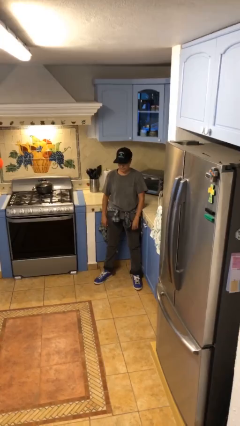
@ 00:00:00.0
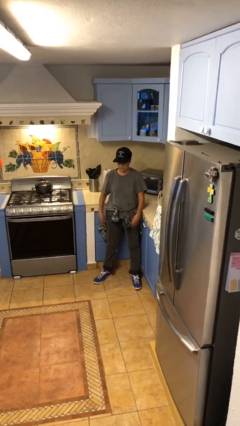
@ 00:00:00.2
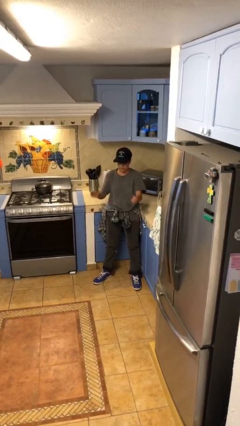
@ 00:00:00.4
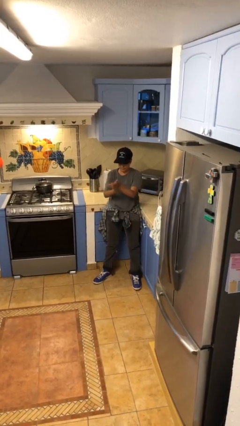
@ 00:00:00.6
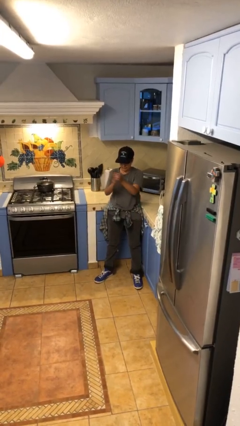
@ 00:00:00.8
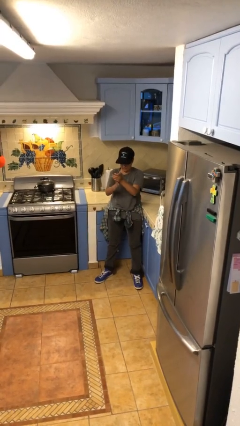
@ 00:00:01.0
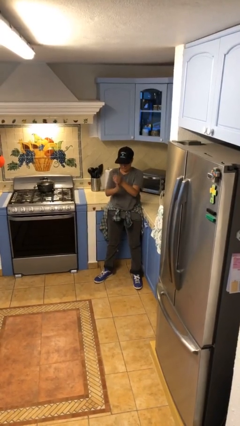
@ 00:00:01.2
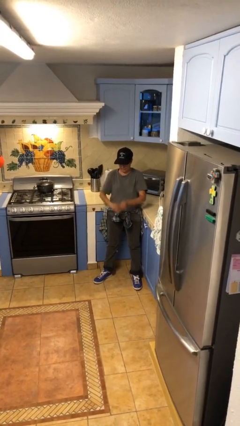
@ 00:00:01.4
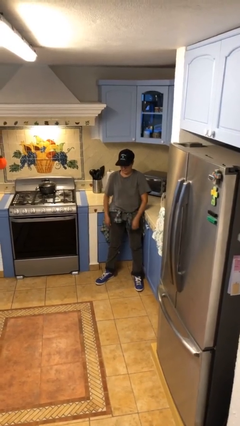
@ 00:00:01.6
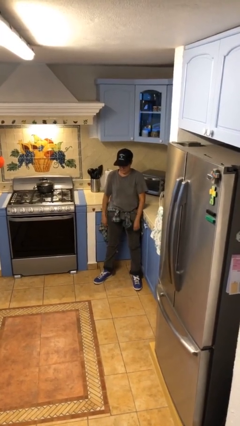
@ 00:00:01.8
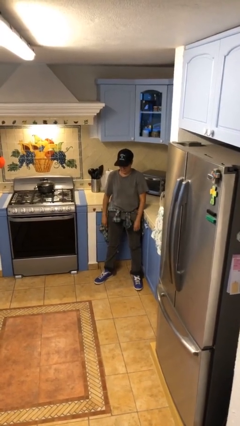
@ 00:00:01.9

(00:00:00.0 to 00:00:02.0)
person claps hands

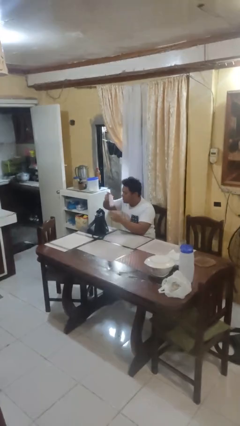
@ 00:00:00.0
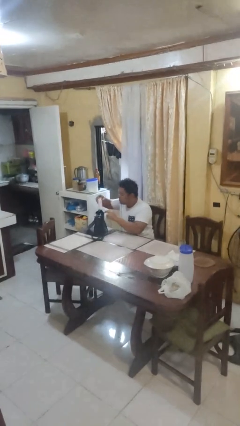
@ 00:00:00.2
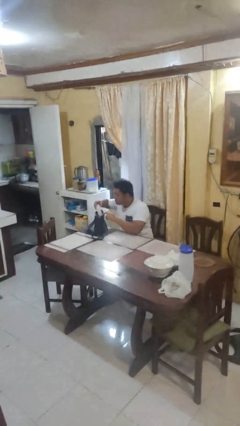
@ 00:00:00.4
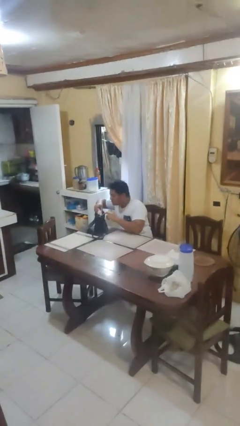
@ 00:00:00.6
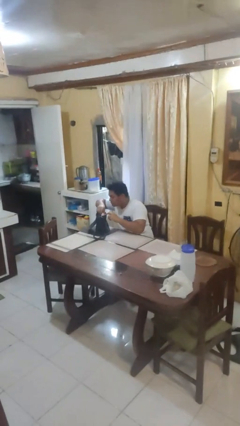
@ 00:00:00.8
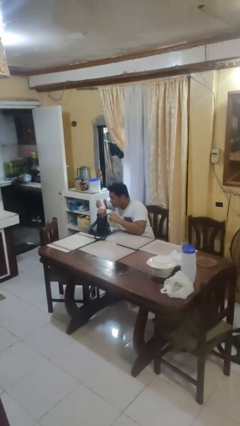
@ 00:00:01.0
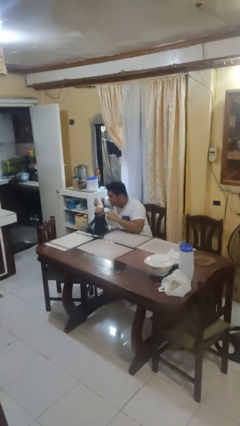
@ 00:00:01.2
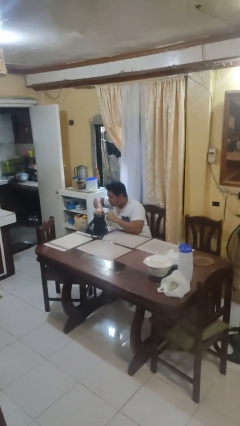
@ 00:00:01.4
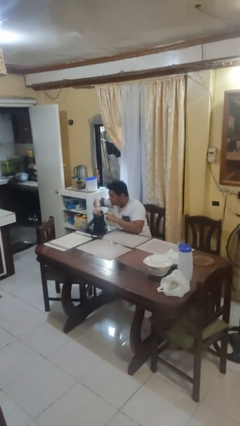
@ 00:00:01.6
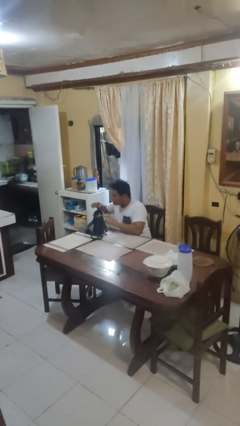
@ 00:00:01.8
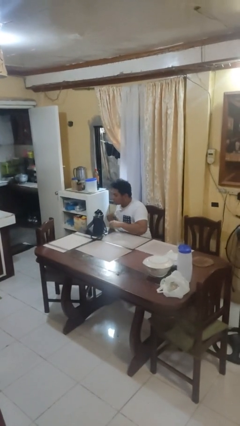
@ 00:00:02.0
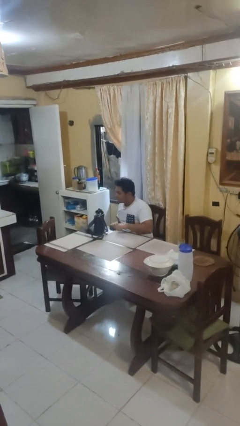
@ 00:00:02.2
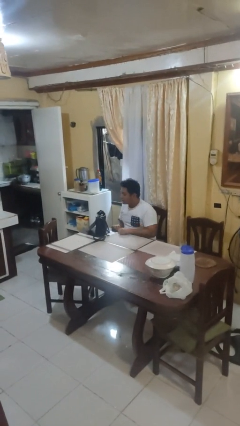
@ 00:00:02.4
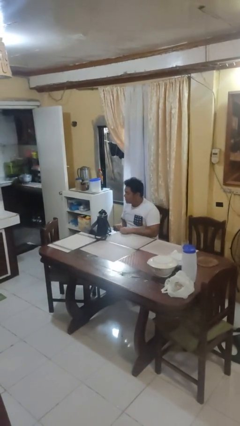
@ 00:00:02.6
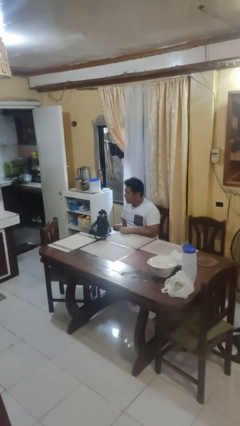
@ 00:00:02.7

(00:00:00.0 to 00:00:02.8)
person puts object into purse

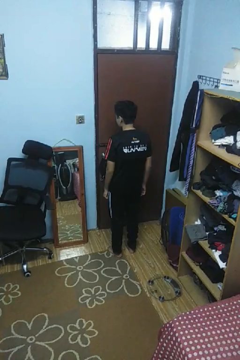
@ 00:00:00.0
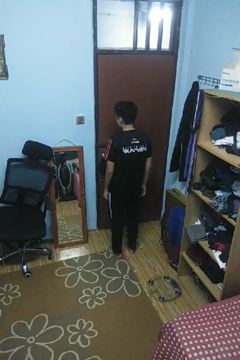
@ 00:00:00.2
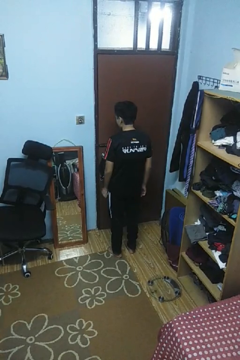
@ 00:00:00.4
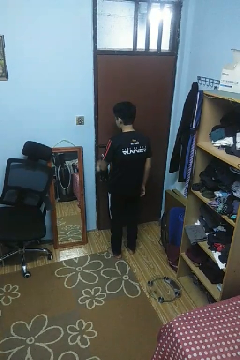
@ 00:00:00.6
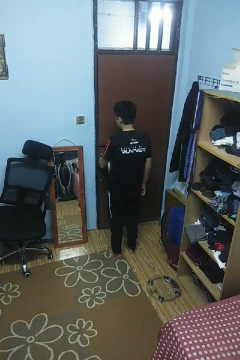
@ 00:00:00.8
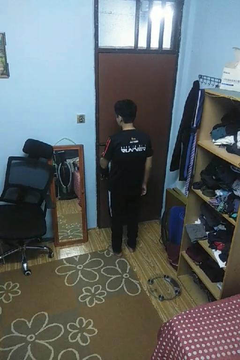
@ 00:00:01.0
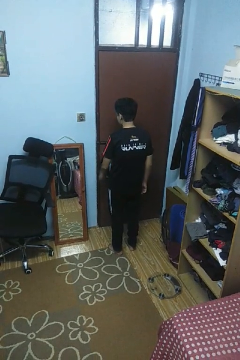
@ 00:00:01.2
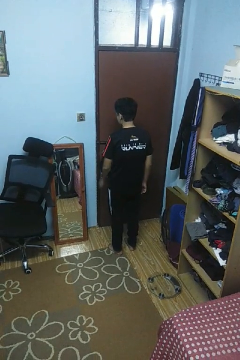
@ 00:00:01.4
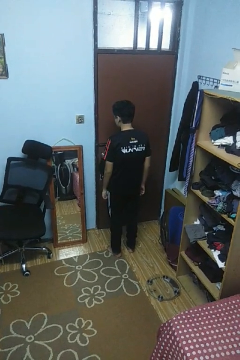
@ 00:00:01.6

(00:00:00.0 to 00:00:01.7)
person unlocks door with keys

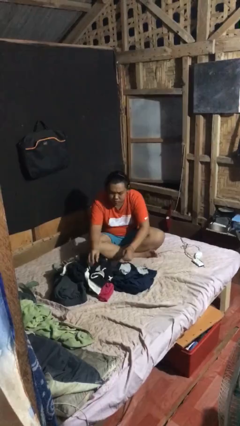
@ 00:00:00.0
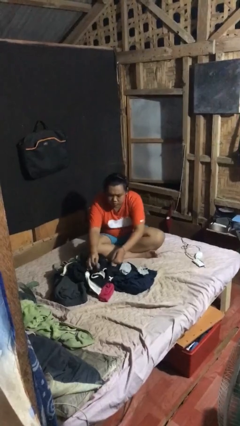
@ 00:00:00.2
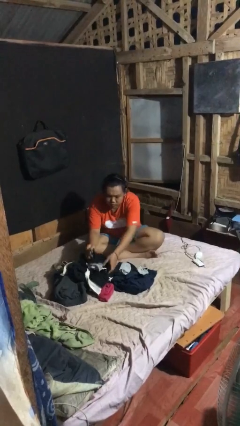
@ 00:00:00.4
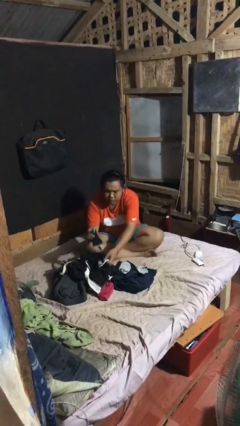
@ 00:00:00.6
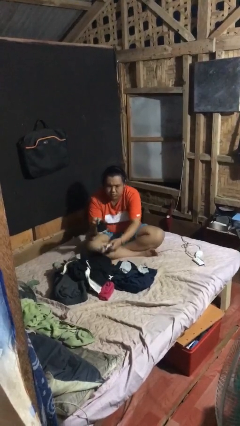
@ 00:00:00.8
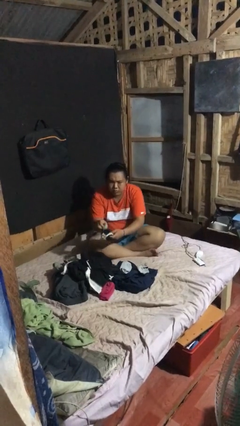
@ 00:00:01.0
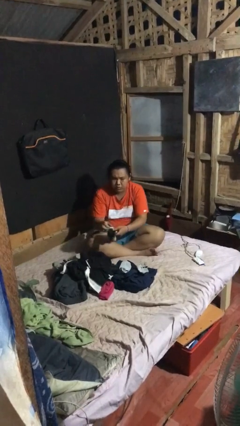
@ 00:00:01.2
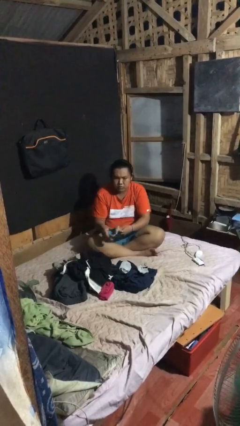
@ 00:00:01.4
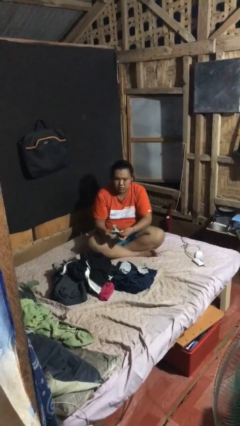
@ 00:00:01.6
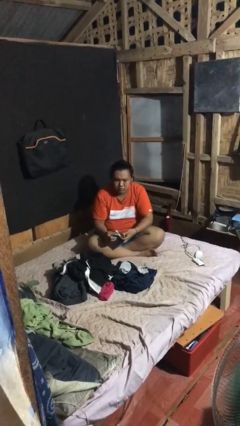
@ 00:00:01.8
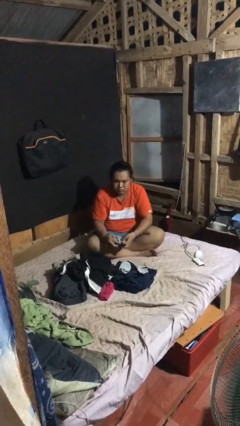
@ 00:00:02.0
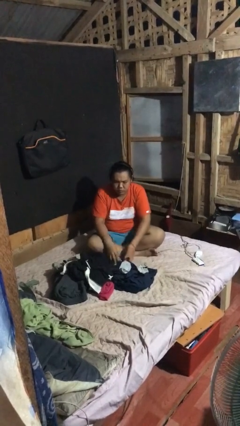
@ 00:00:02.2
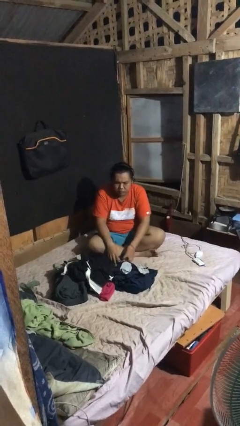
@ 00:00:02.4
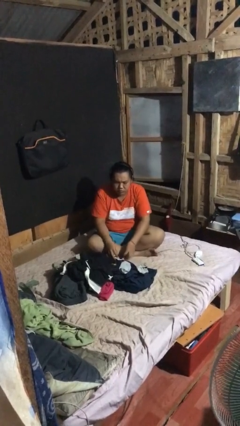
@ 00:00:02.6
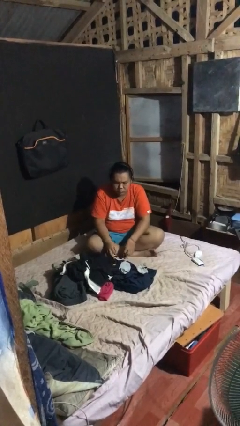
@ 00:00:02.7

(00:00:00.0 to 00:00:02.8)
person folds socks

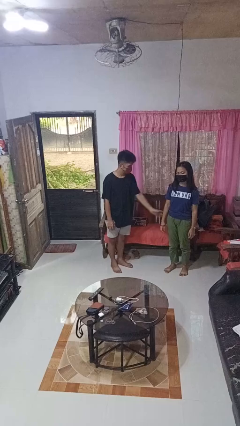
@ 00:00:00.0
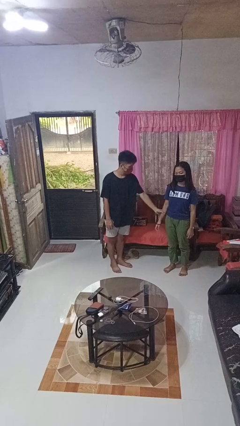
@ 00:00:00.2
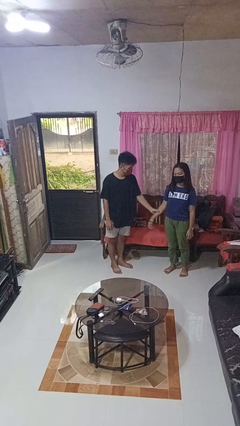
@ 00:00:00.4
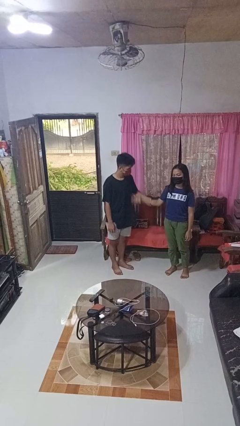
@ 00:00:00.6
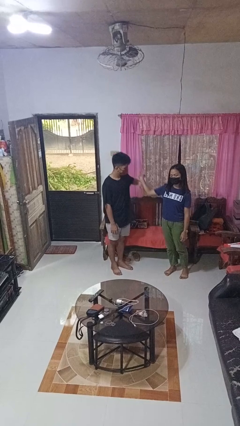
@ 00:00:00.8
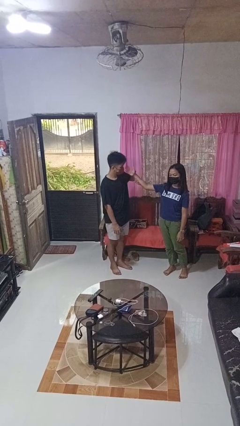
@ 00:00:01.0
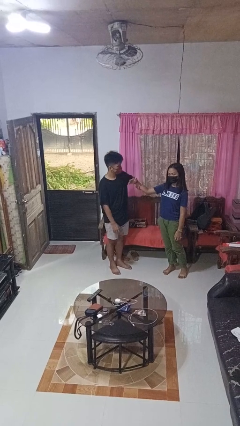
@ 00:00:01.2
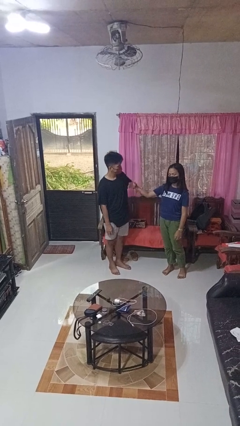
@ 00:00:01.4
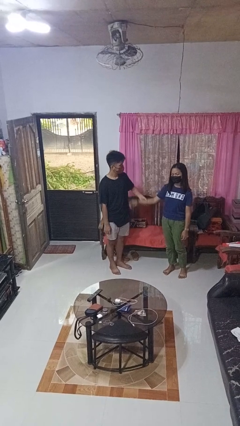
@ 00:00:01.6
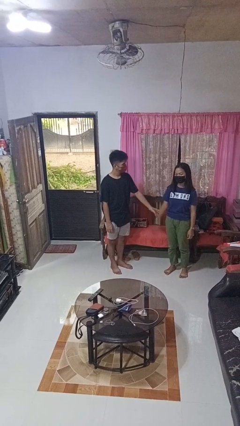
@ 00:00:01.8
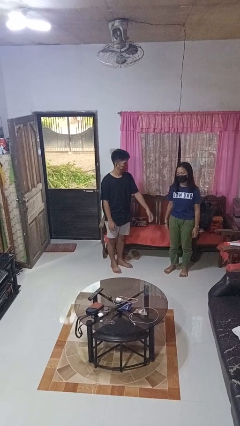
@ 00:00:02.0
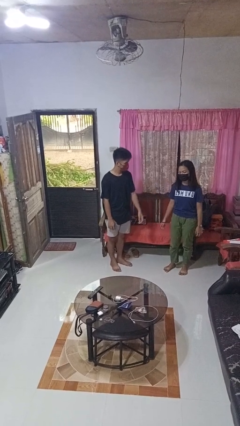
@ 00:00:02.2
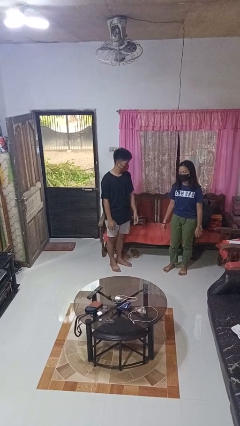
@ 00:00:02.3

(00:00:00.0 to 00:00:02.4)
person grabs person by forearm

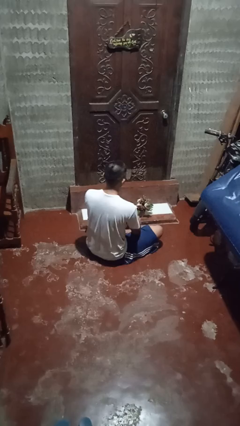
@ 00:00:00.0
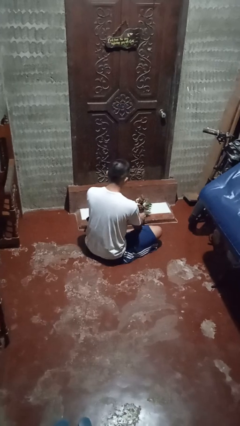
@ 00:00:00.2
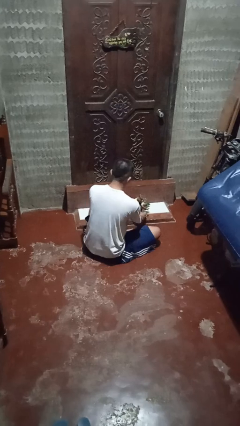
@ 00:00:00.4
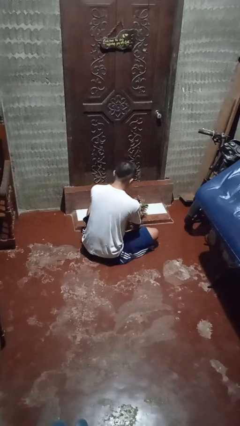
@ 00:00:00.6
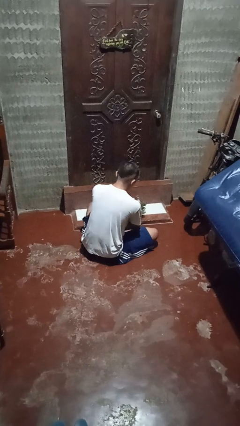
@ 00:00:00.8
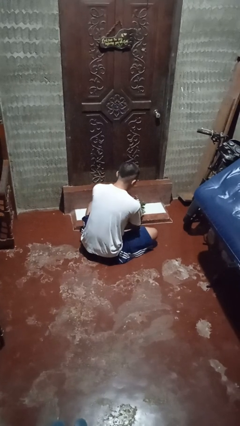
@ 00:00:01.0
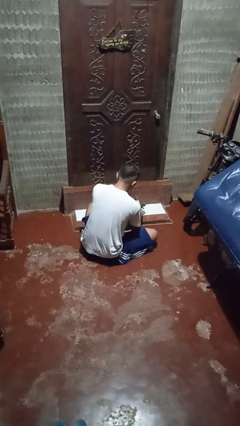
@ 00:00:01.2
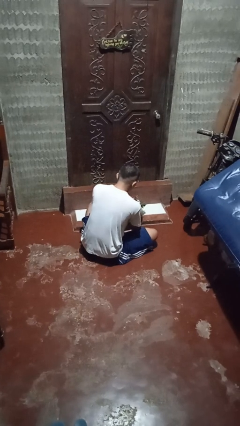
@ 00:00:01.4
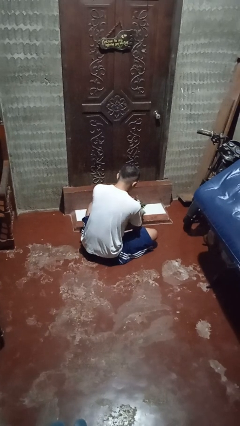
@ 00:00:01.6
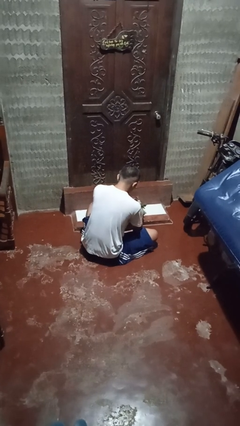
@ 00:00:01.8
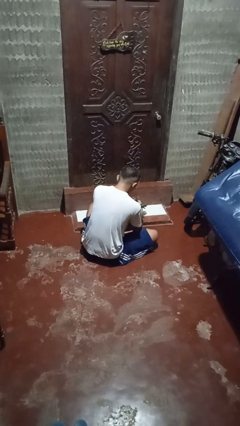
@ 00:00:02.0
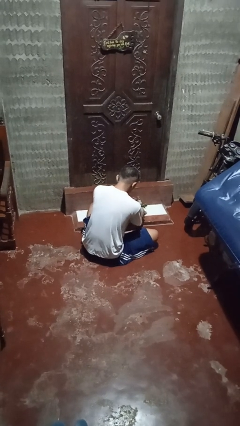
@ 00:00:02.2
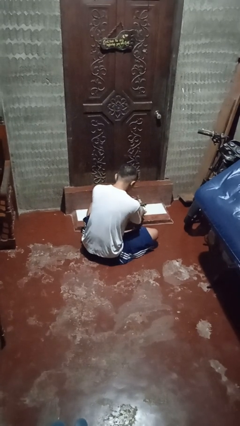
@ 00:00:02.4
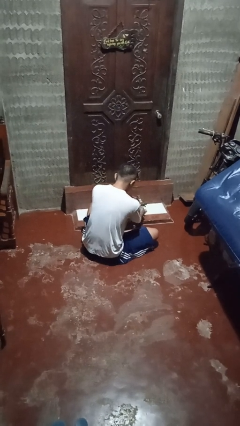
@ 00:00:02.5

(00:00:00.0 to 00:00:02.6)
person arranges flowers in vase

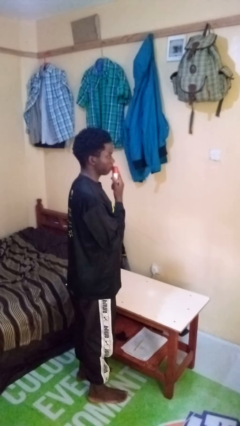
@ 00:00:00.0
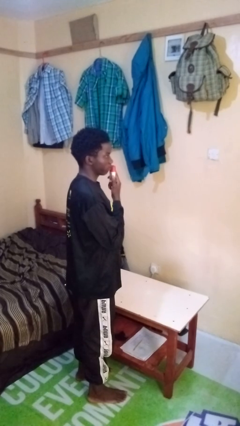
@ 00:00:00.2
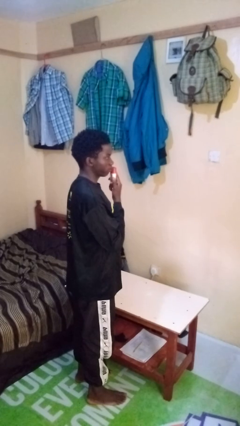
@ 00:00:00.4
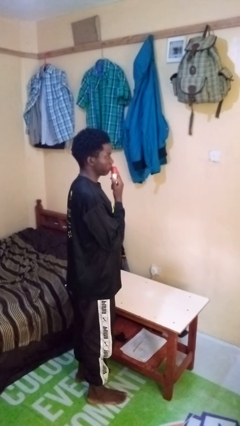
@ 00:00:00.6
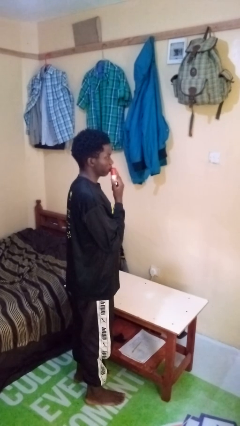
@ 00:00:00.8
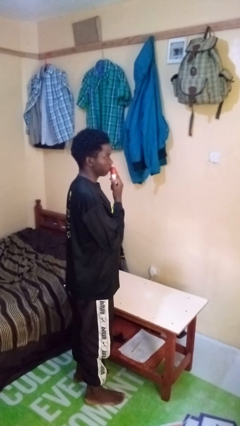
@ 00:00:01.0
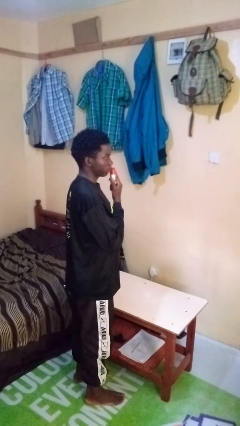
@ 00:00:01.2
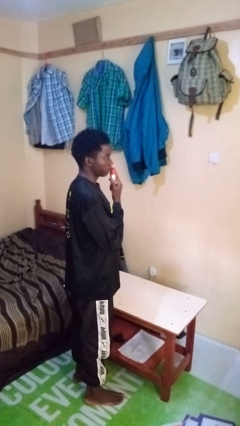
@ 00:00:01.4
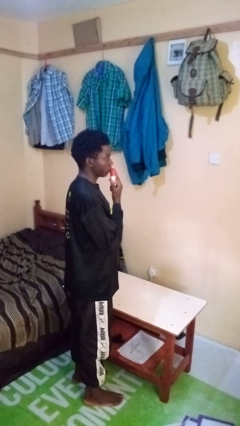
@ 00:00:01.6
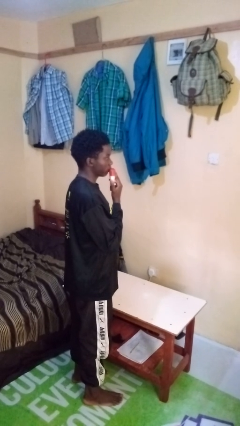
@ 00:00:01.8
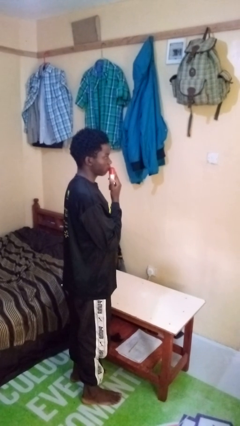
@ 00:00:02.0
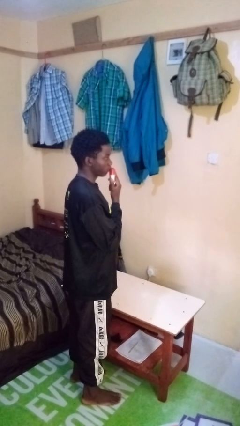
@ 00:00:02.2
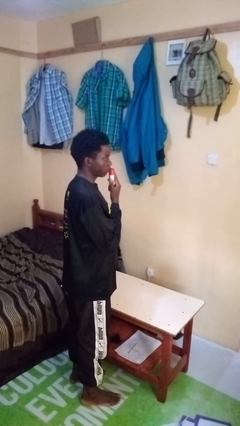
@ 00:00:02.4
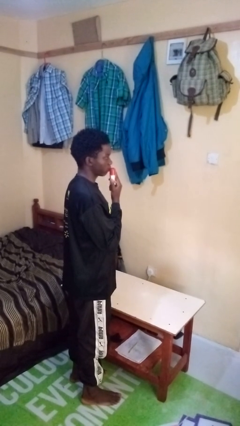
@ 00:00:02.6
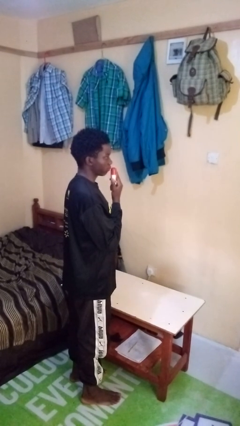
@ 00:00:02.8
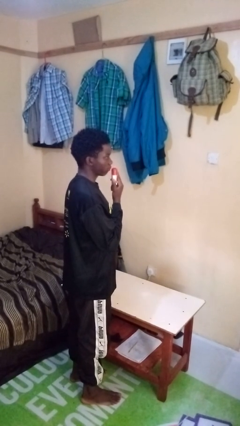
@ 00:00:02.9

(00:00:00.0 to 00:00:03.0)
person applies lip makeup
